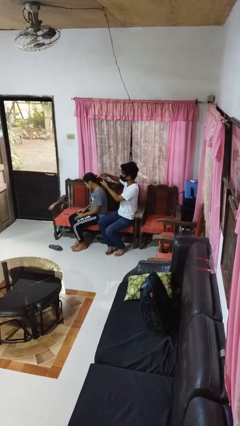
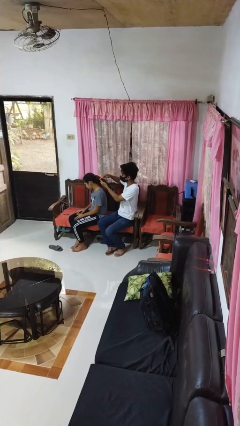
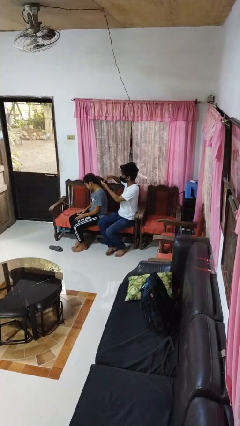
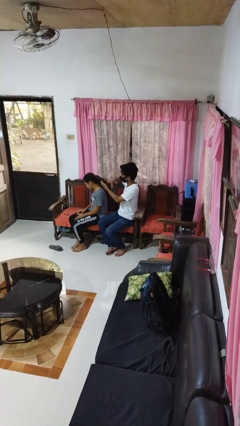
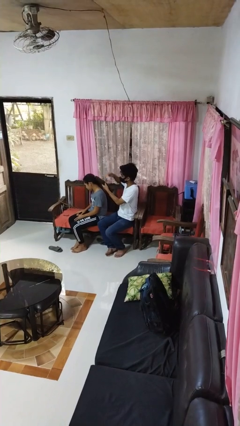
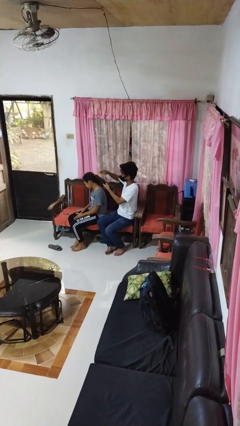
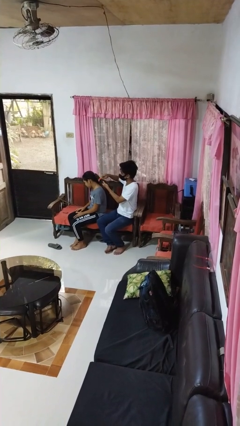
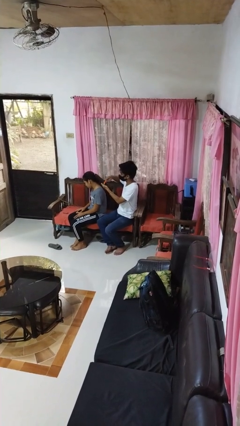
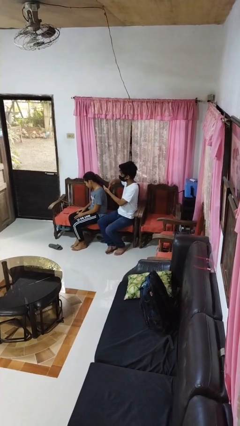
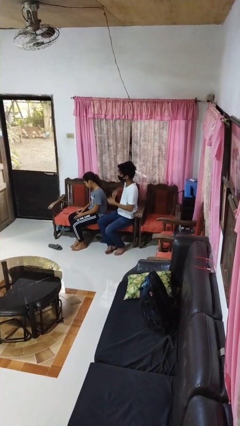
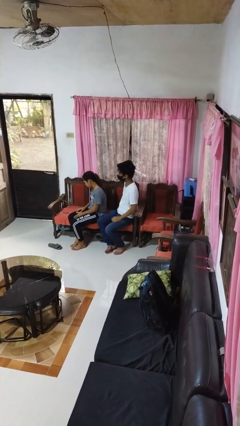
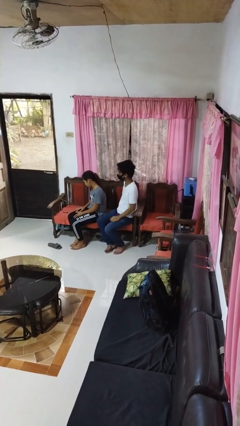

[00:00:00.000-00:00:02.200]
person brushes hair of person

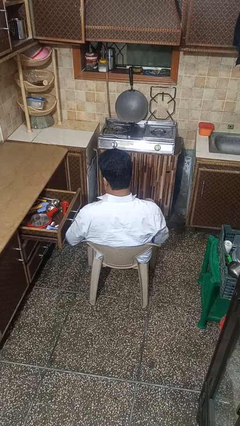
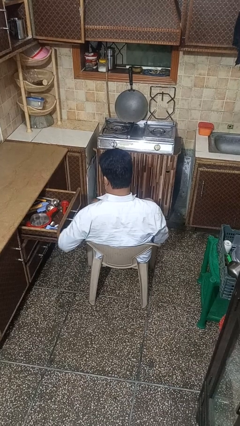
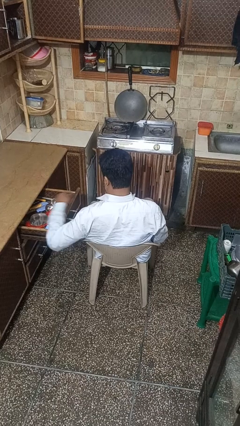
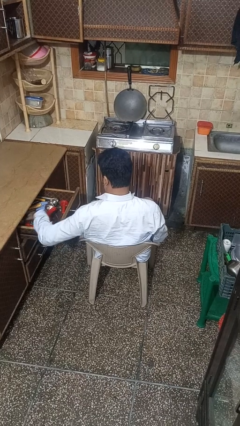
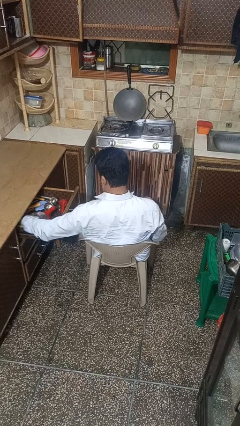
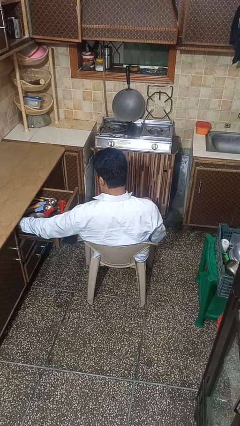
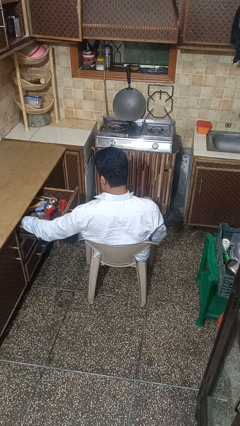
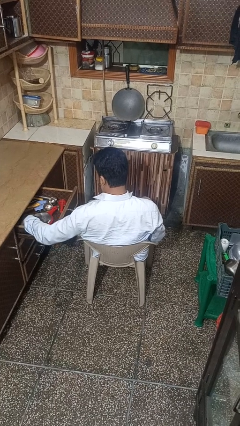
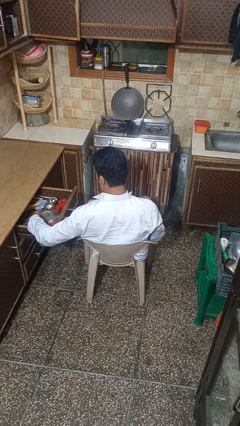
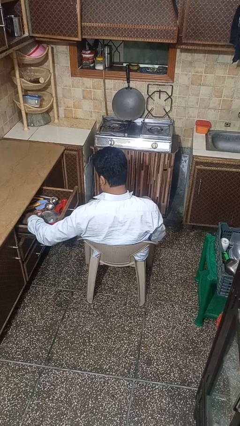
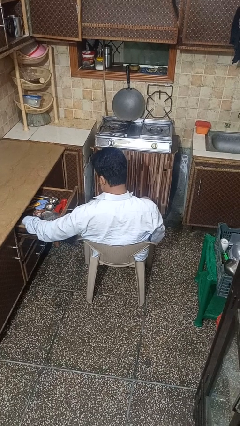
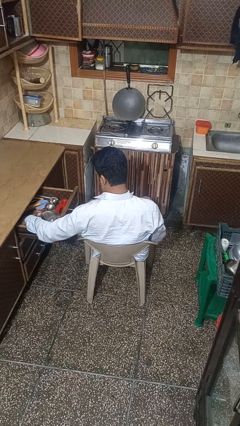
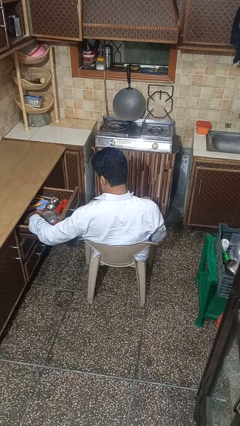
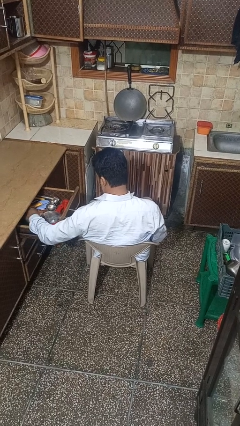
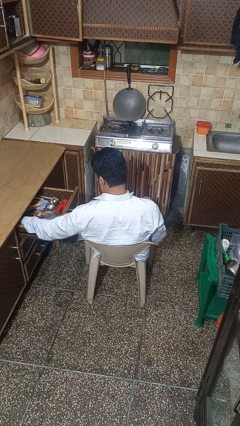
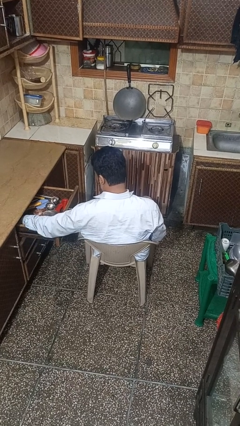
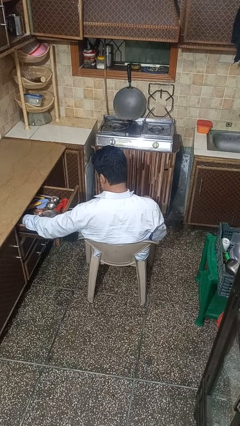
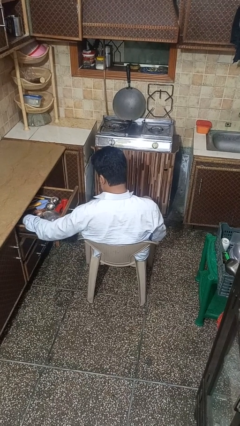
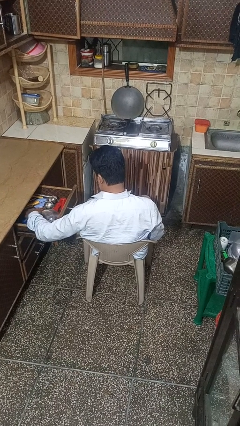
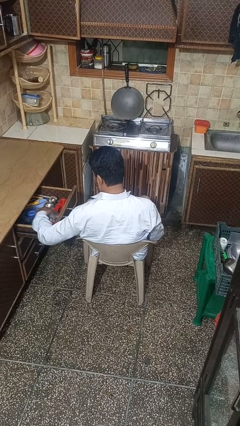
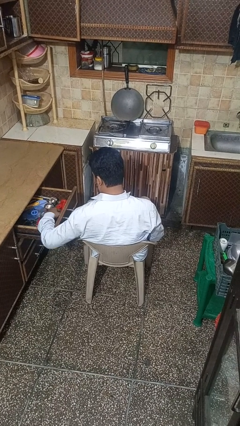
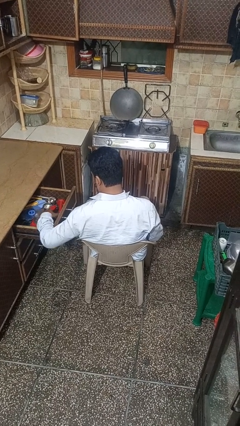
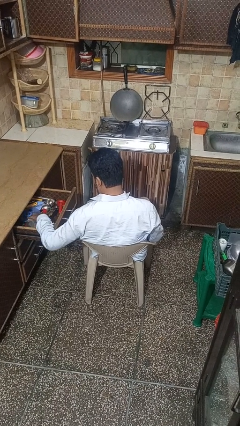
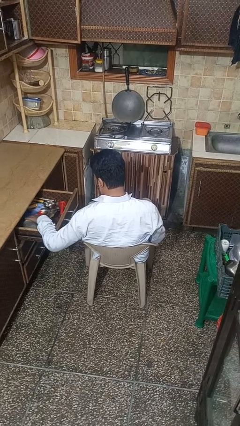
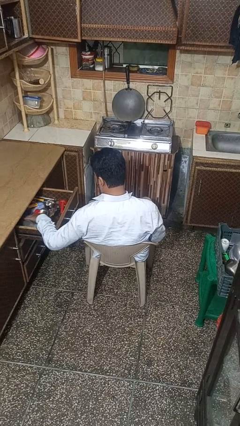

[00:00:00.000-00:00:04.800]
person searches in kitchen drawer

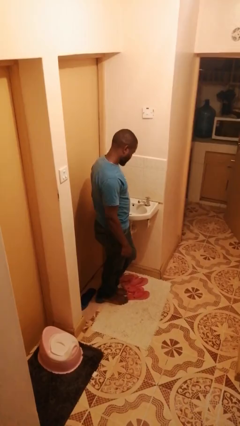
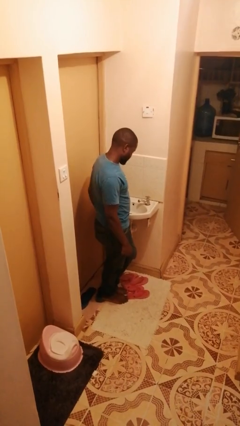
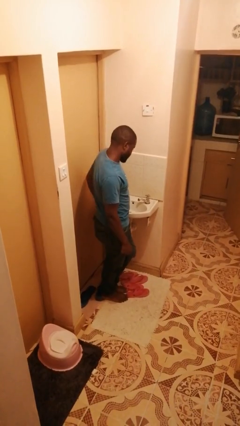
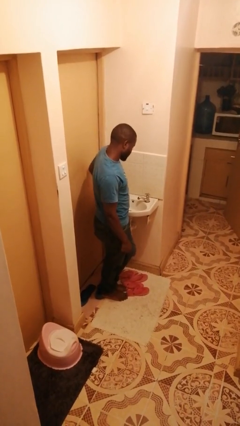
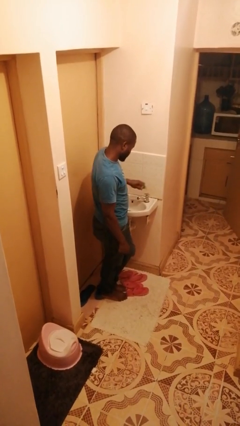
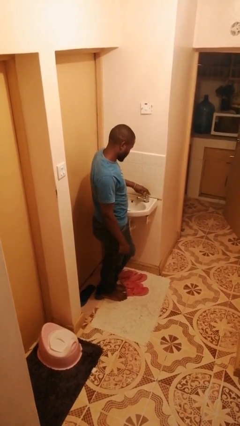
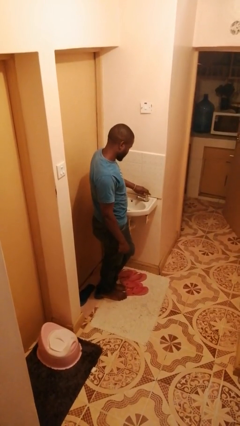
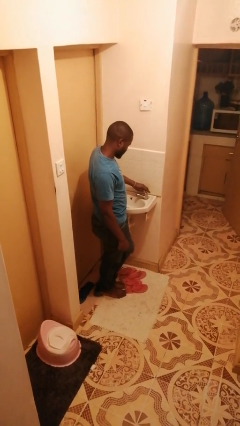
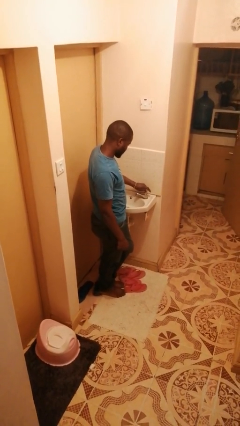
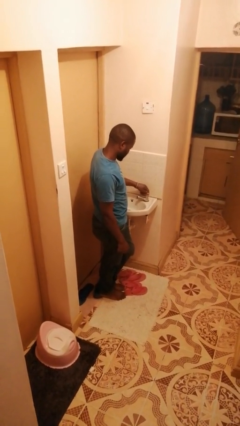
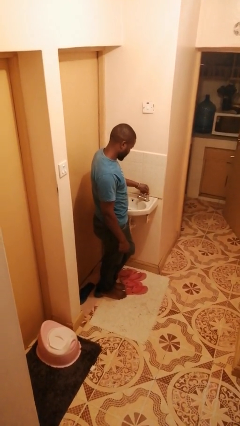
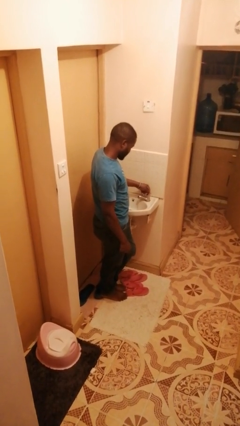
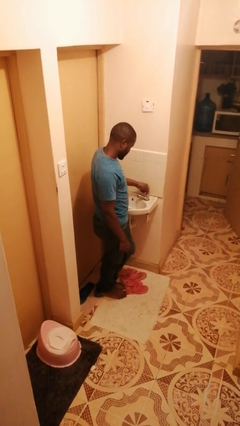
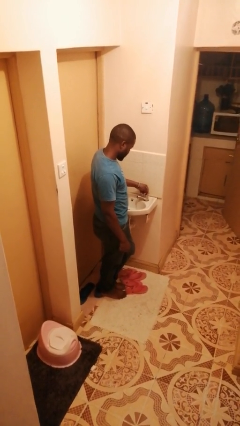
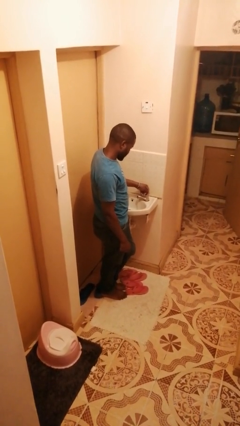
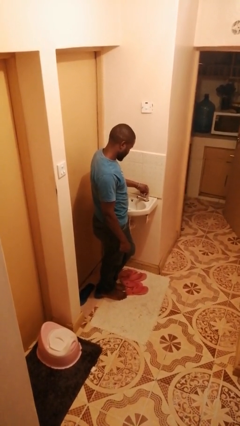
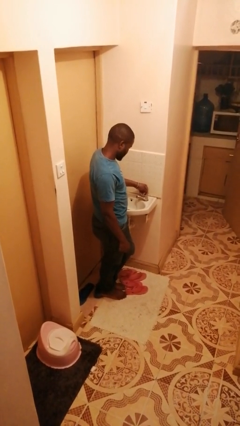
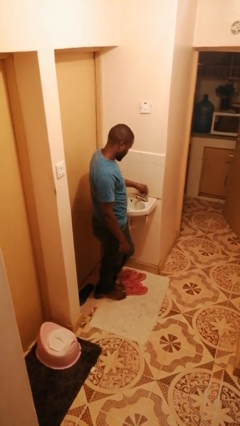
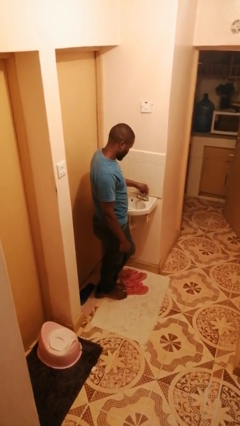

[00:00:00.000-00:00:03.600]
person turns on faucet

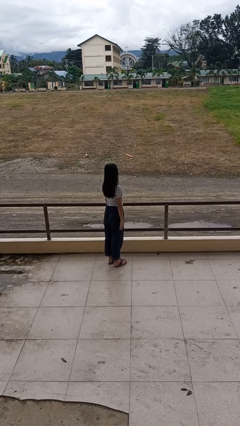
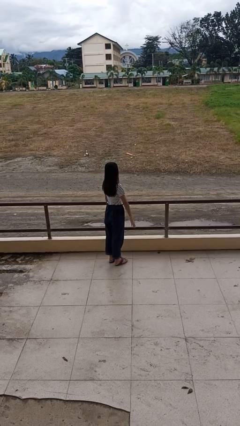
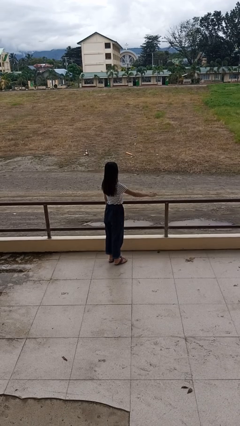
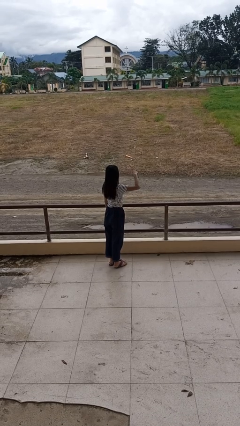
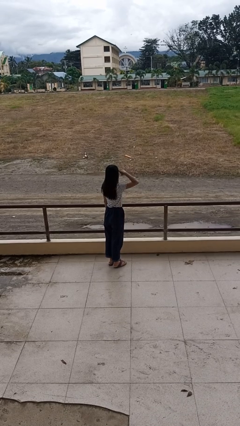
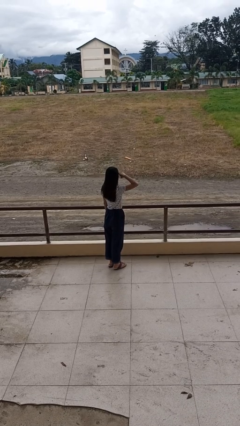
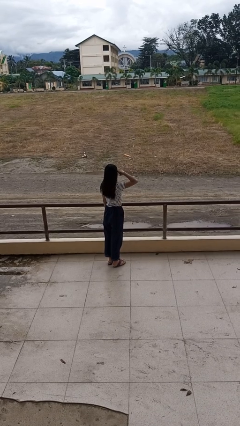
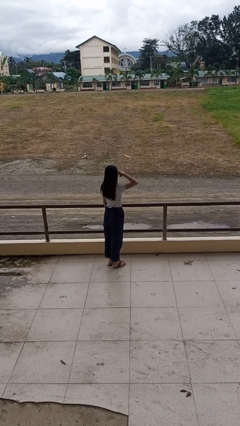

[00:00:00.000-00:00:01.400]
person salutes

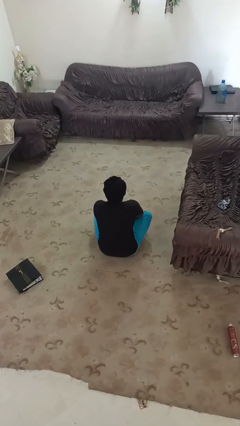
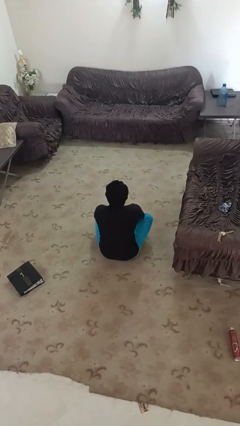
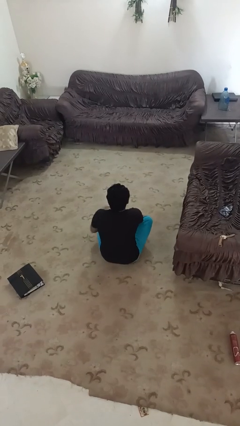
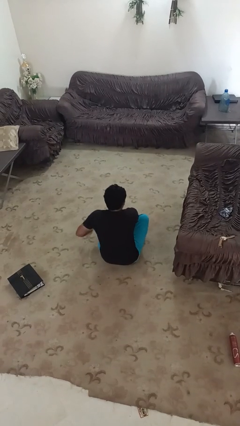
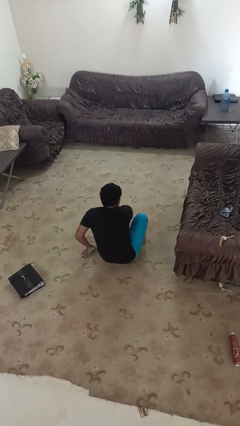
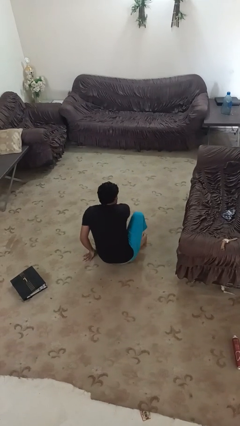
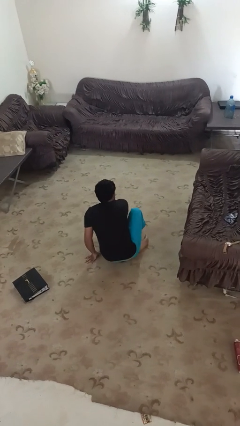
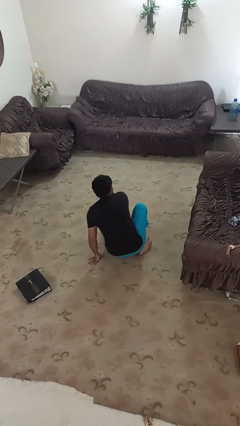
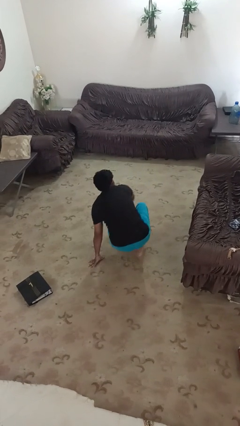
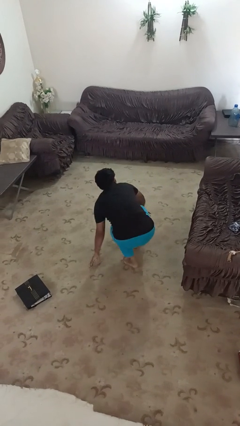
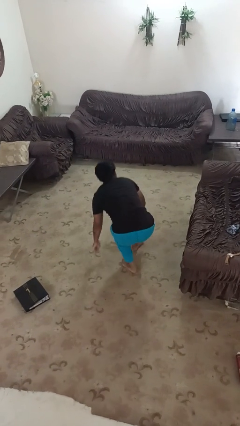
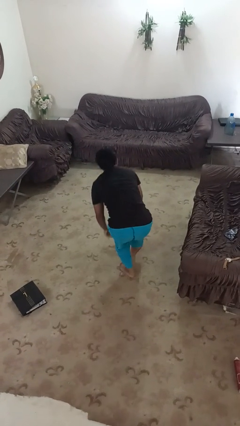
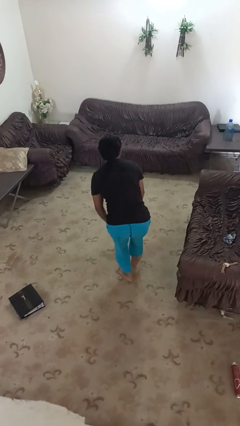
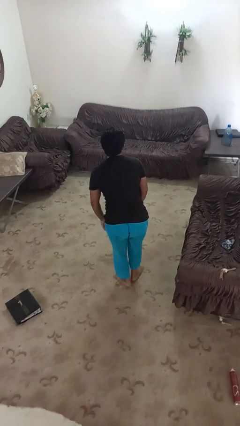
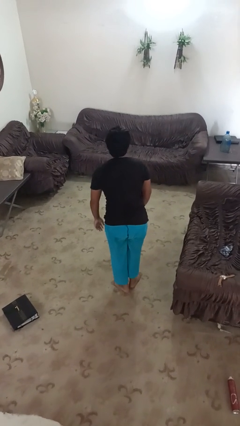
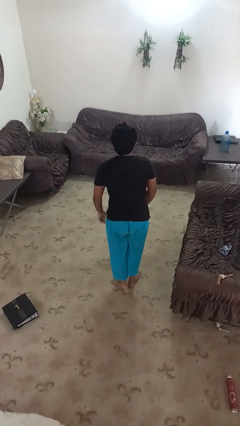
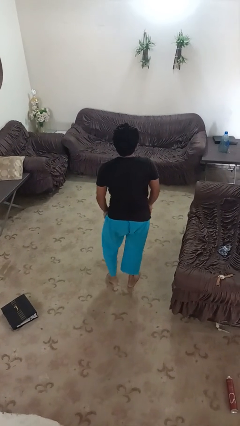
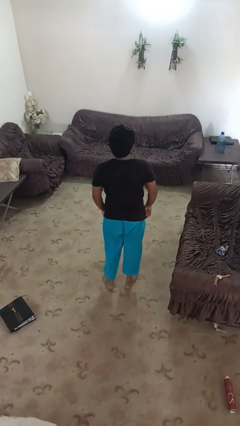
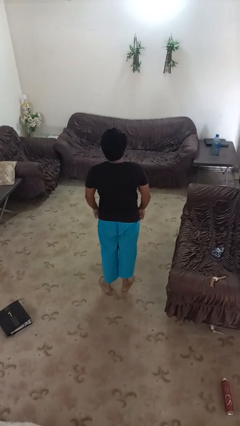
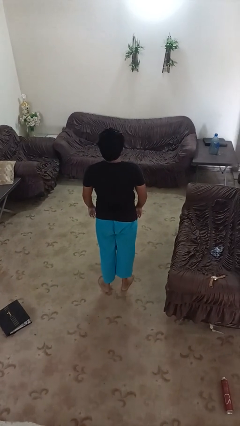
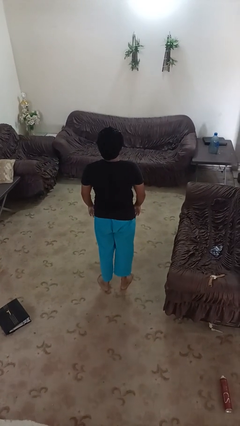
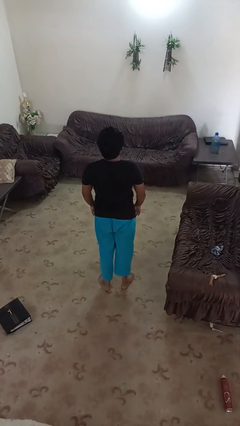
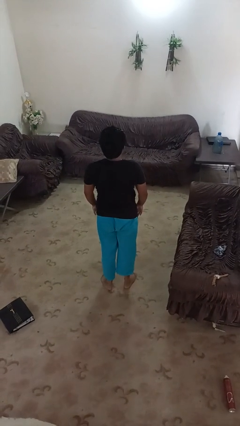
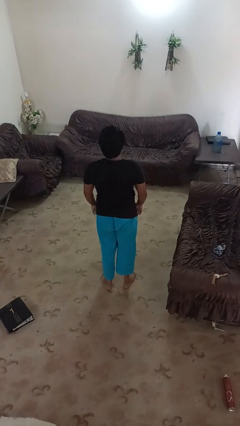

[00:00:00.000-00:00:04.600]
person stands up from floor

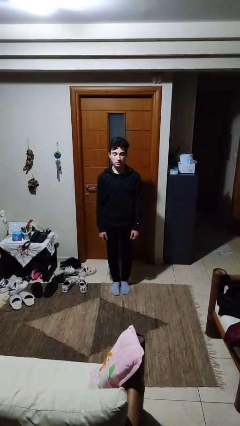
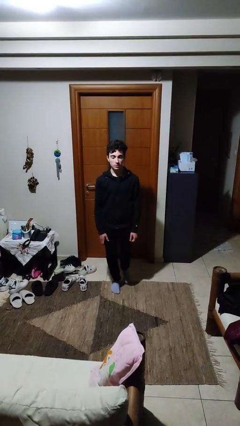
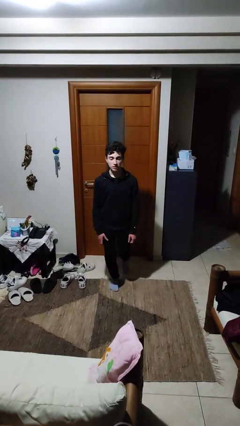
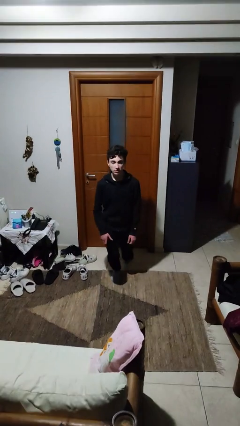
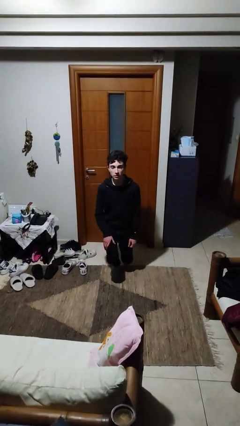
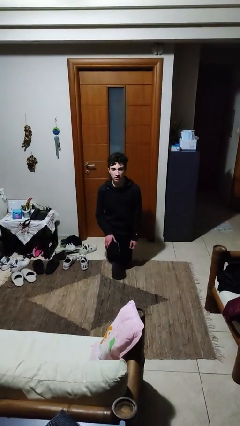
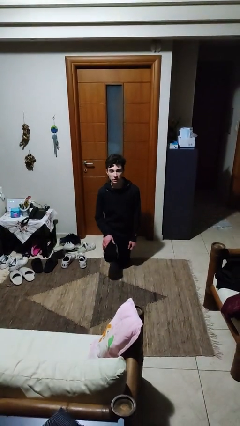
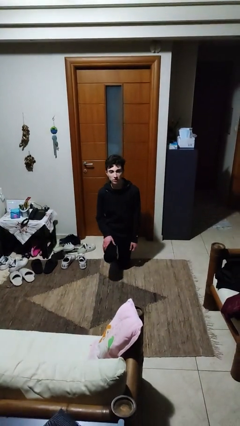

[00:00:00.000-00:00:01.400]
person kneels
